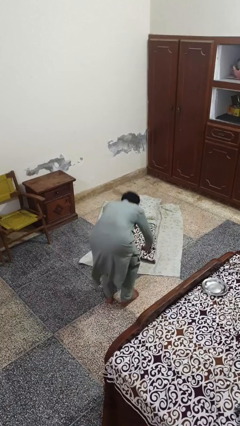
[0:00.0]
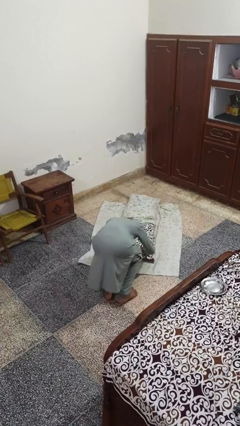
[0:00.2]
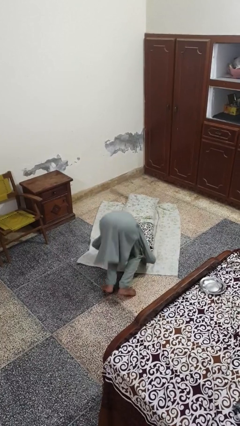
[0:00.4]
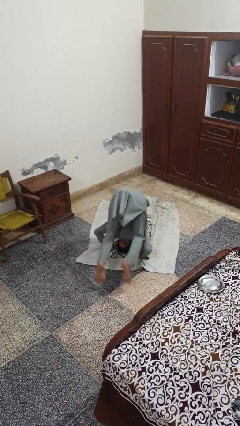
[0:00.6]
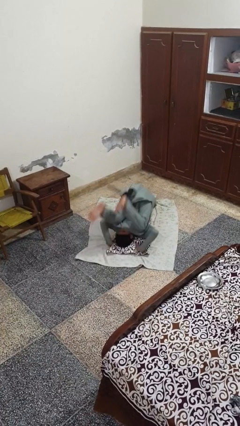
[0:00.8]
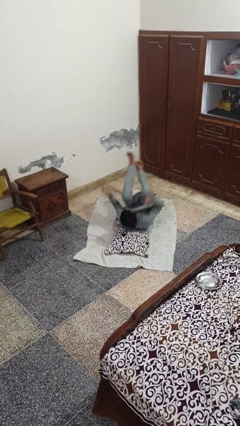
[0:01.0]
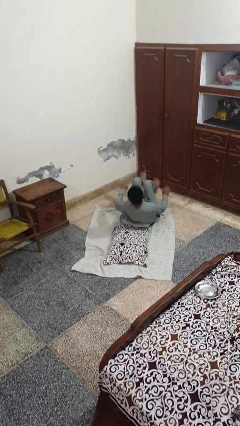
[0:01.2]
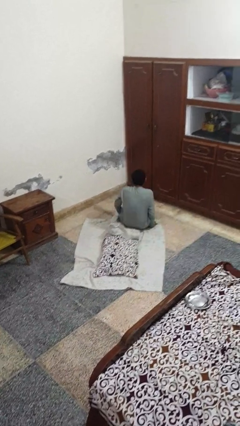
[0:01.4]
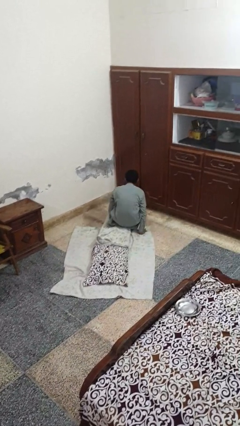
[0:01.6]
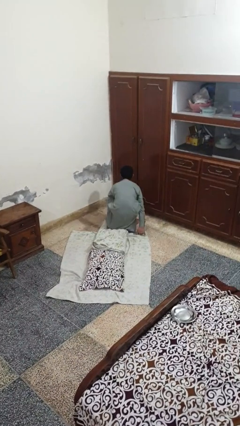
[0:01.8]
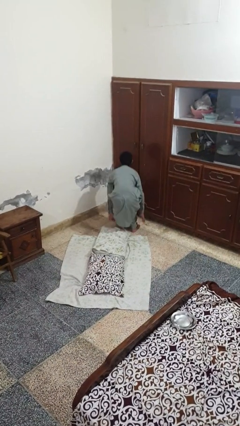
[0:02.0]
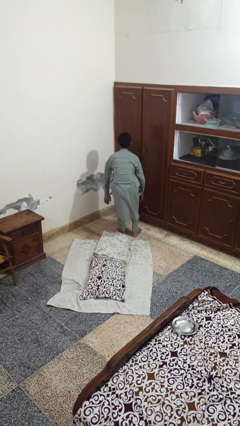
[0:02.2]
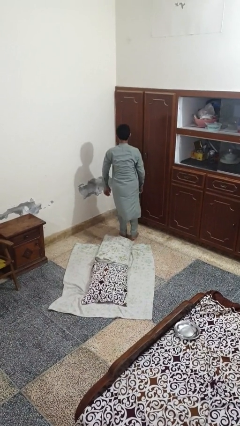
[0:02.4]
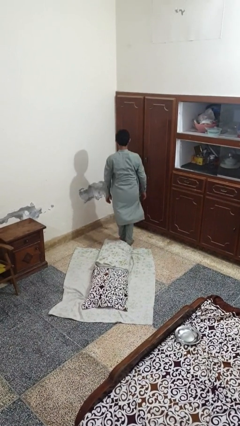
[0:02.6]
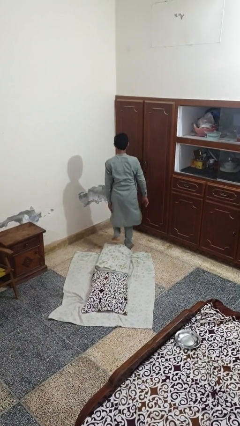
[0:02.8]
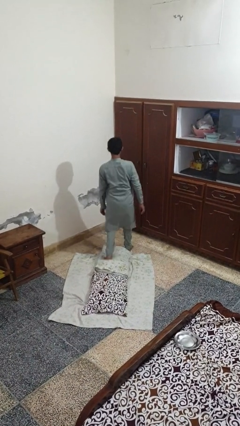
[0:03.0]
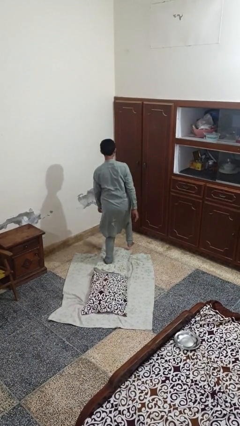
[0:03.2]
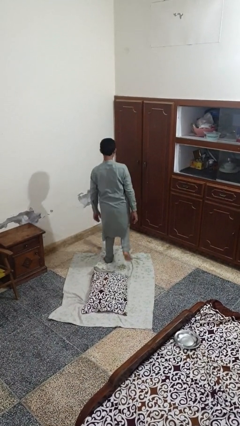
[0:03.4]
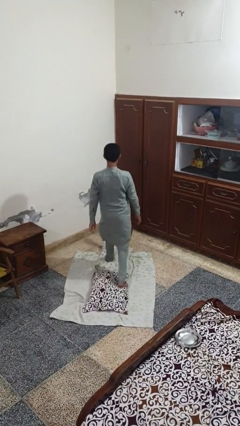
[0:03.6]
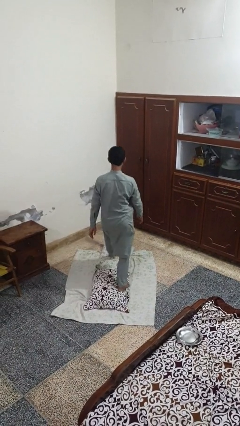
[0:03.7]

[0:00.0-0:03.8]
person somersaults

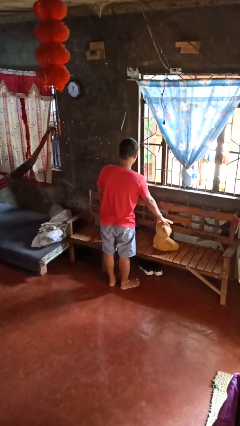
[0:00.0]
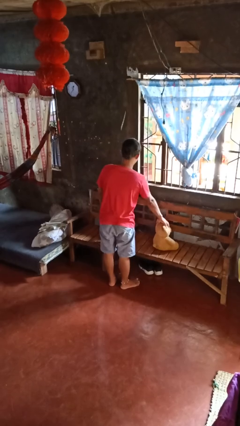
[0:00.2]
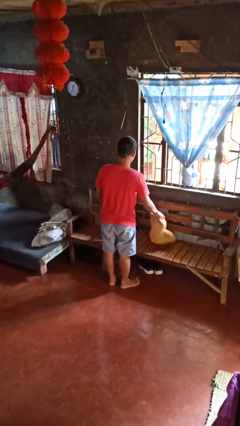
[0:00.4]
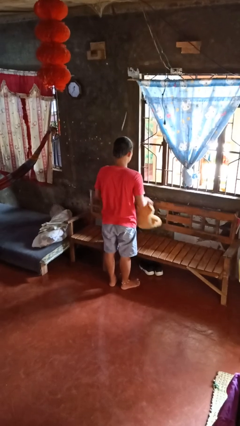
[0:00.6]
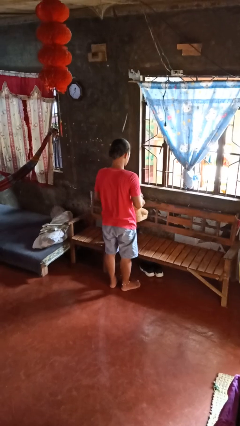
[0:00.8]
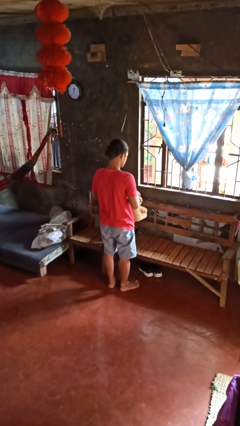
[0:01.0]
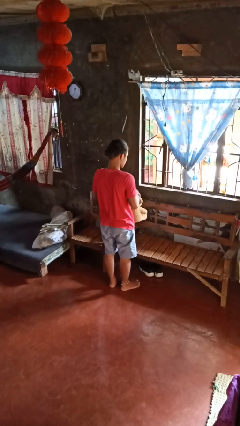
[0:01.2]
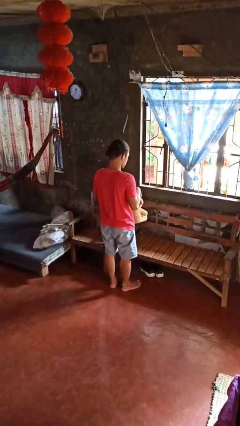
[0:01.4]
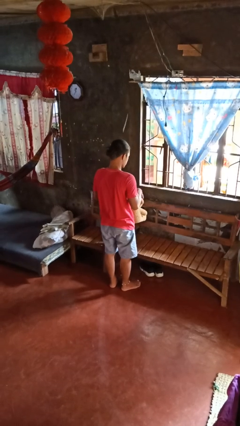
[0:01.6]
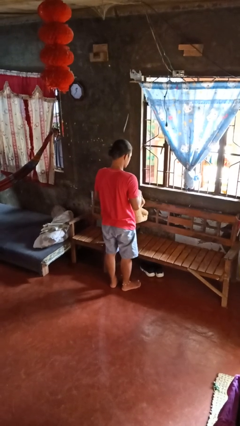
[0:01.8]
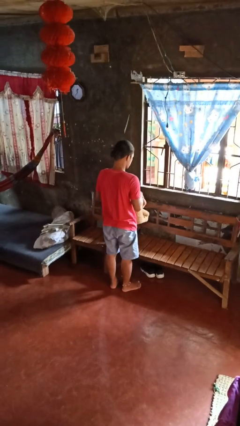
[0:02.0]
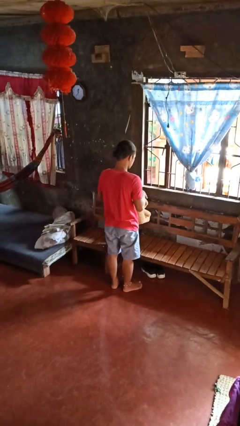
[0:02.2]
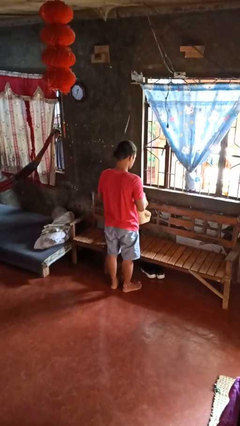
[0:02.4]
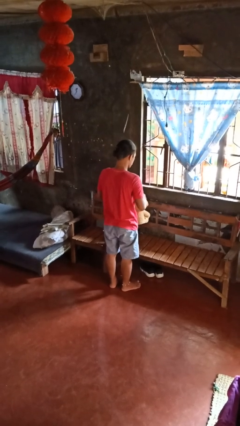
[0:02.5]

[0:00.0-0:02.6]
person picks up object from couch

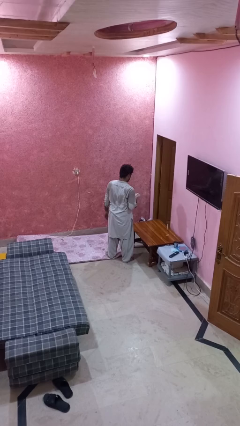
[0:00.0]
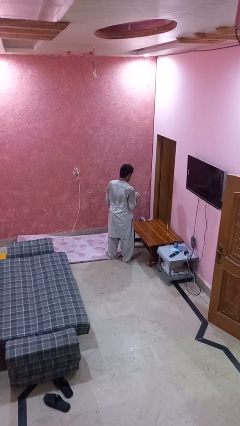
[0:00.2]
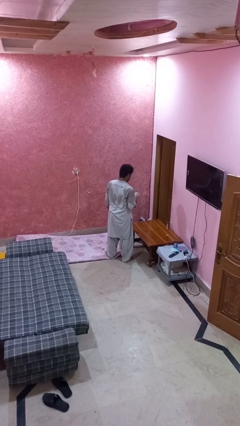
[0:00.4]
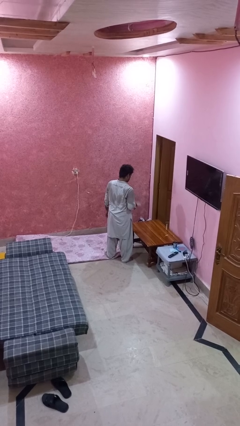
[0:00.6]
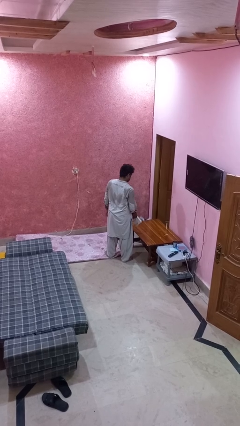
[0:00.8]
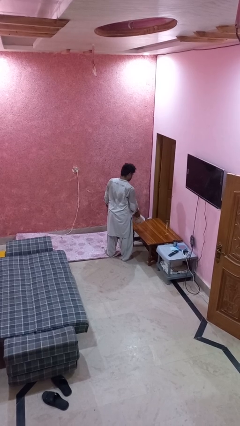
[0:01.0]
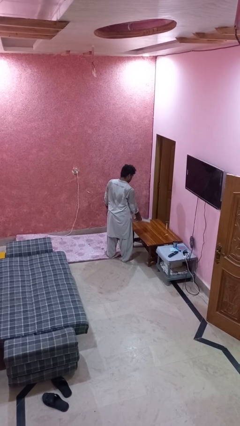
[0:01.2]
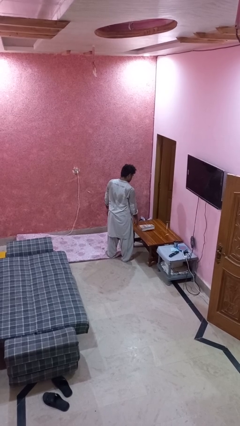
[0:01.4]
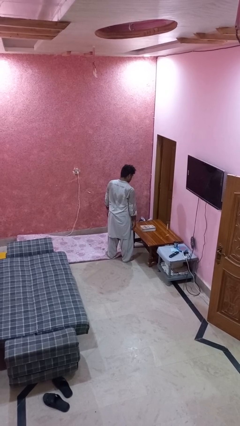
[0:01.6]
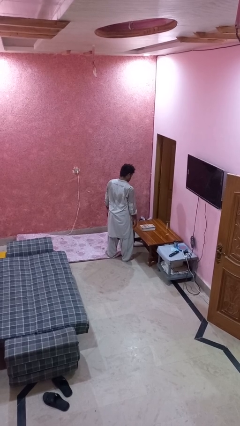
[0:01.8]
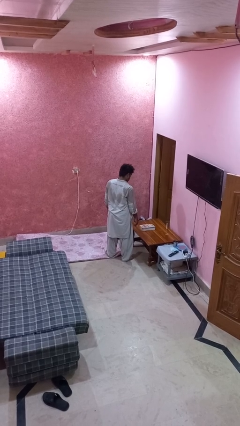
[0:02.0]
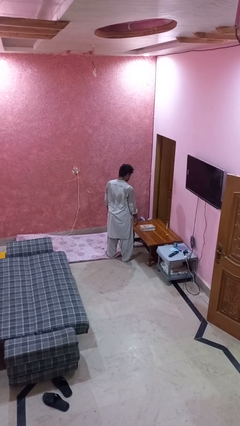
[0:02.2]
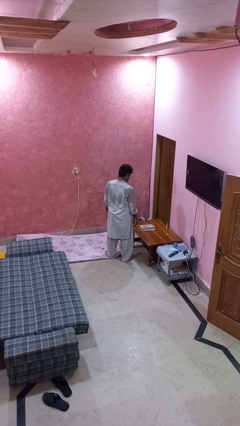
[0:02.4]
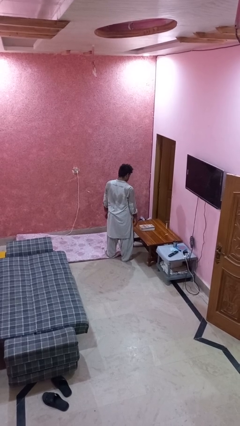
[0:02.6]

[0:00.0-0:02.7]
person throws object on table
